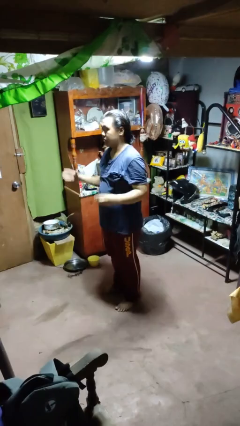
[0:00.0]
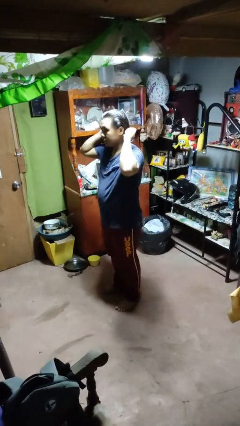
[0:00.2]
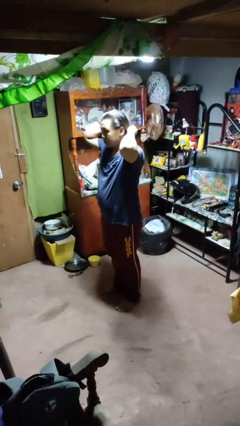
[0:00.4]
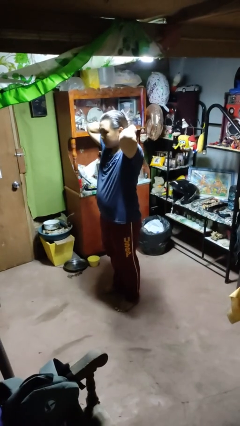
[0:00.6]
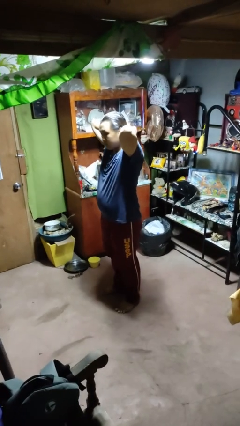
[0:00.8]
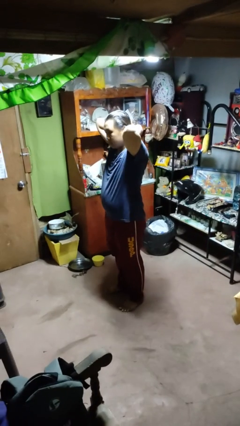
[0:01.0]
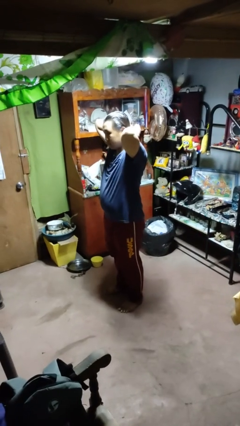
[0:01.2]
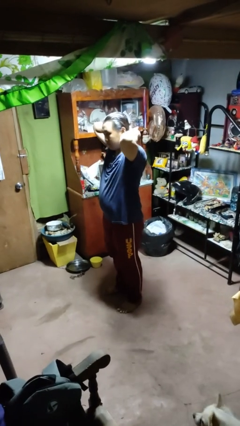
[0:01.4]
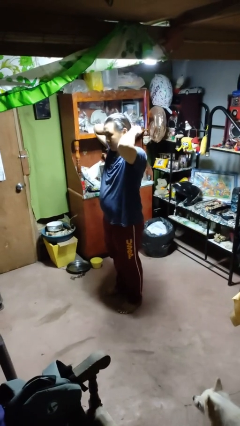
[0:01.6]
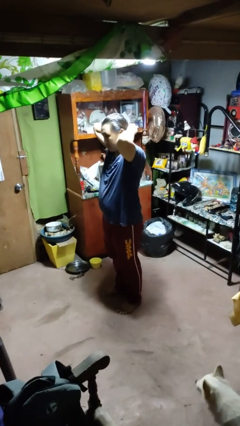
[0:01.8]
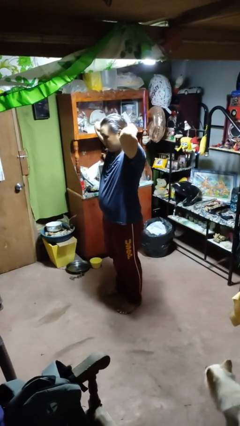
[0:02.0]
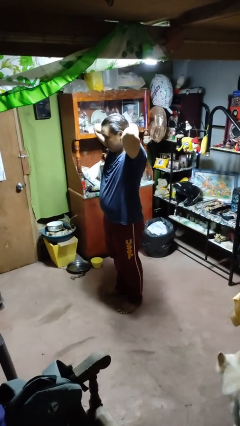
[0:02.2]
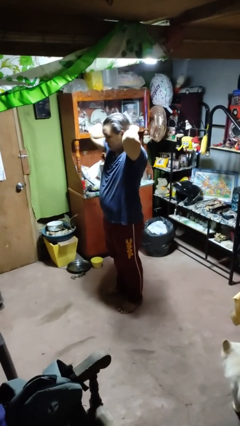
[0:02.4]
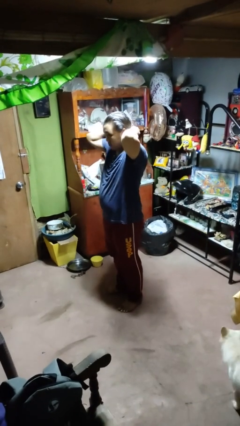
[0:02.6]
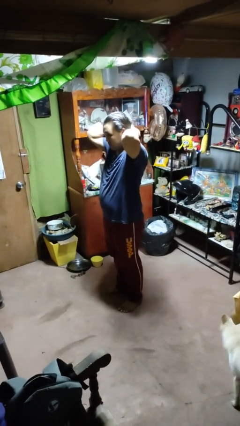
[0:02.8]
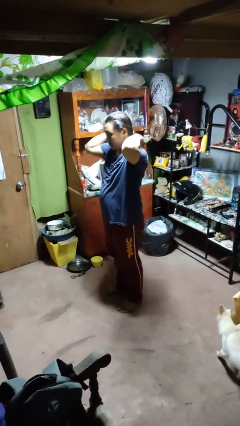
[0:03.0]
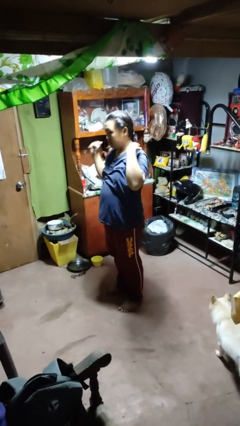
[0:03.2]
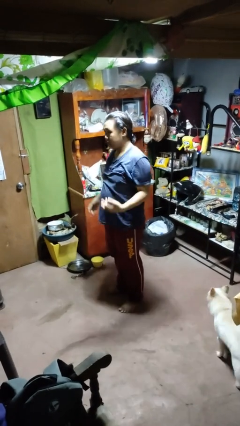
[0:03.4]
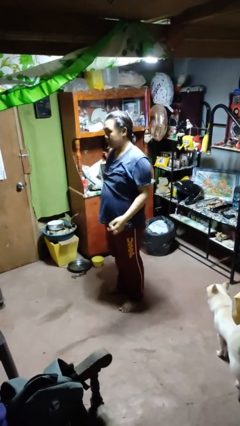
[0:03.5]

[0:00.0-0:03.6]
person puts hair in ponytail

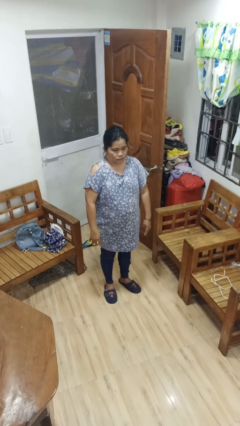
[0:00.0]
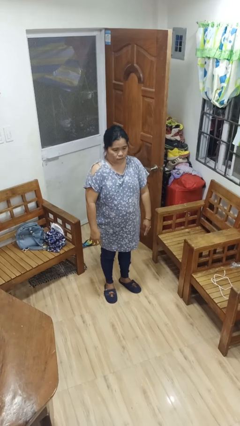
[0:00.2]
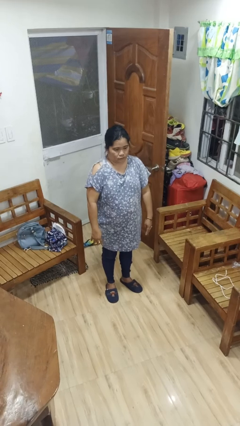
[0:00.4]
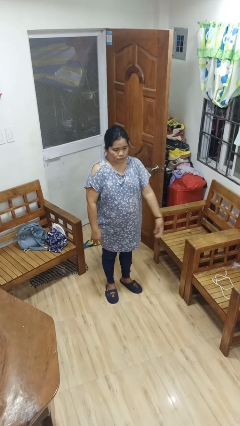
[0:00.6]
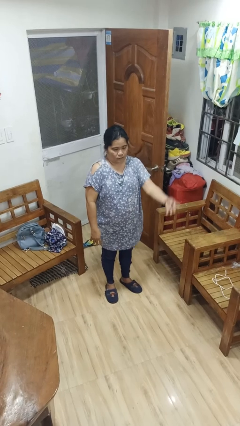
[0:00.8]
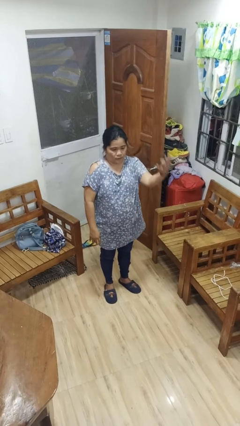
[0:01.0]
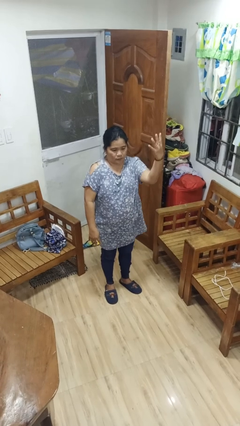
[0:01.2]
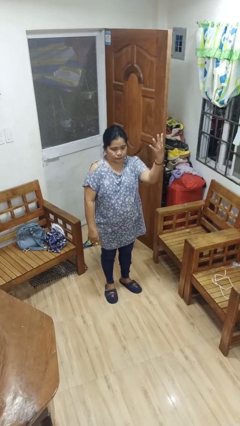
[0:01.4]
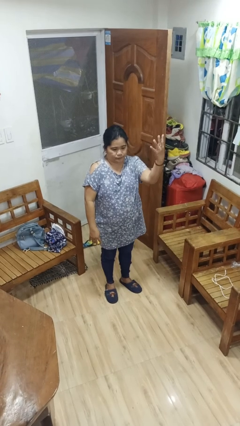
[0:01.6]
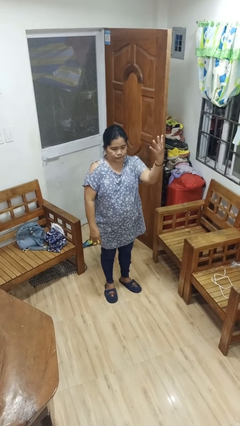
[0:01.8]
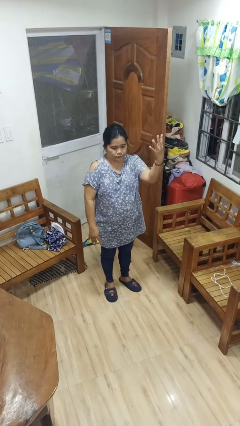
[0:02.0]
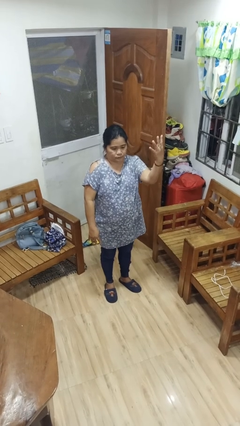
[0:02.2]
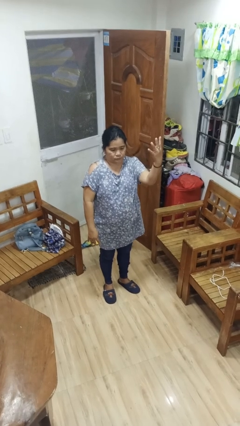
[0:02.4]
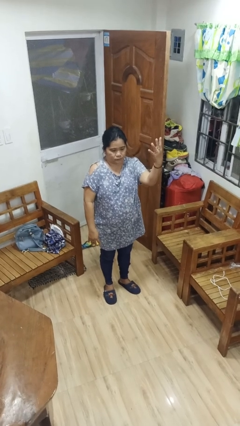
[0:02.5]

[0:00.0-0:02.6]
person gestures number four

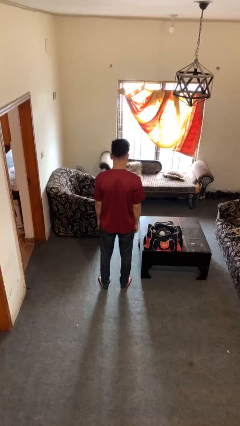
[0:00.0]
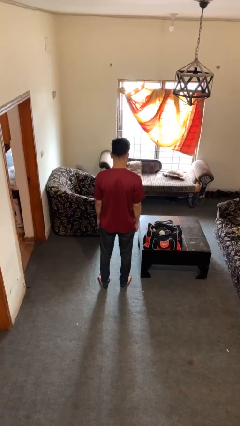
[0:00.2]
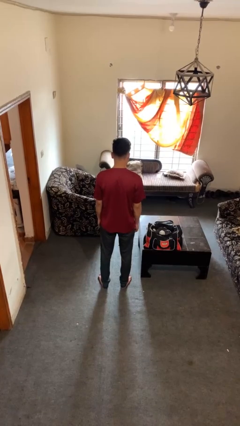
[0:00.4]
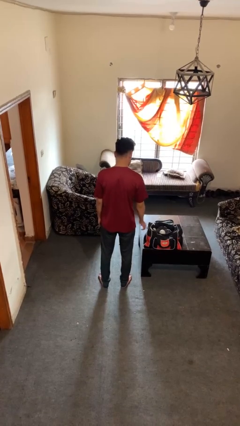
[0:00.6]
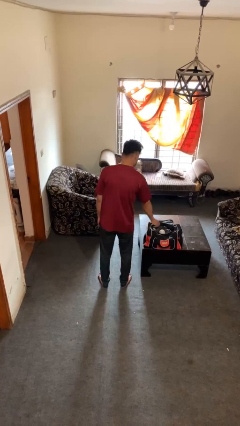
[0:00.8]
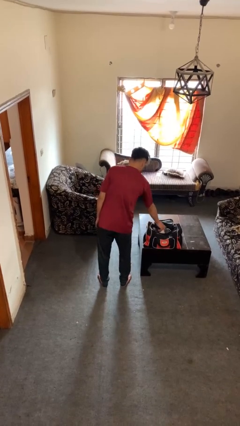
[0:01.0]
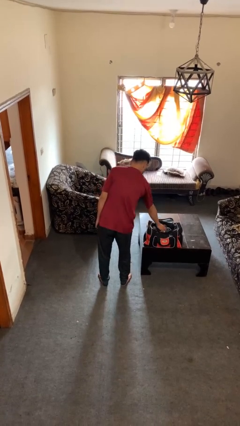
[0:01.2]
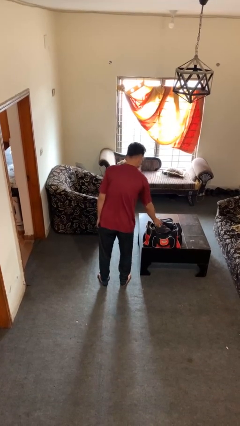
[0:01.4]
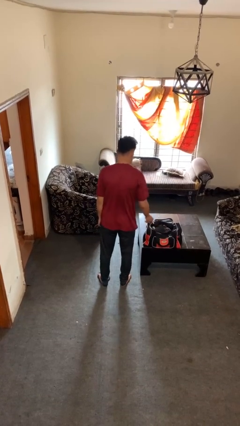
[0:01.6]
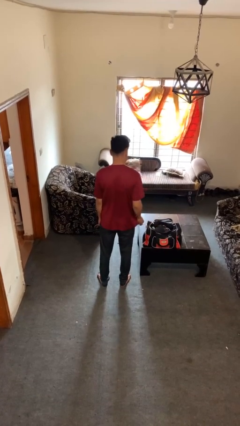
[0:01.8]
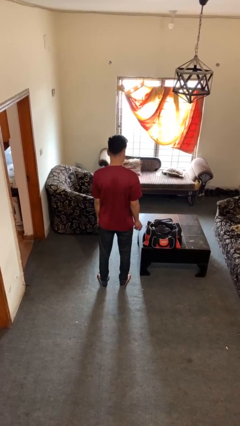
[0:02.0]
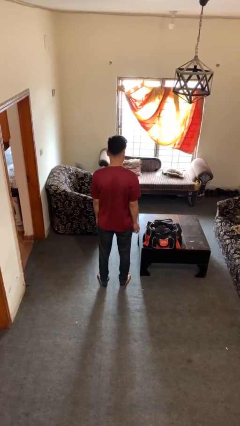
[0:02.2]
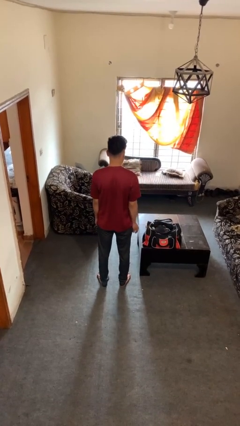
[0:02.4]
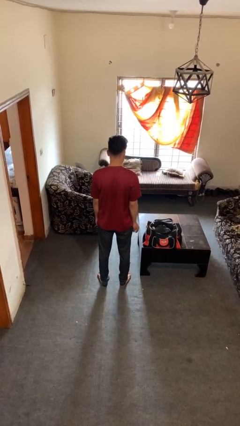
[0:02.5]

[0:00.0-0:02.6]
person takes object from bag

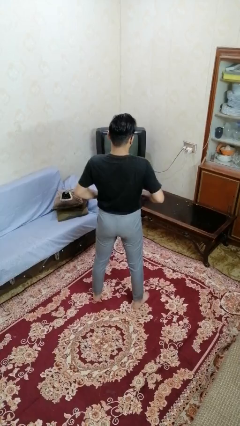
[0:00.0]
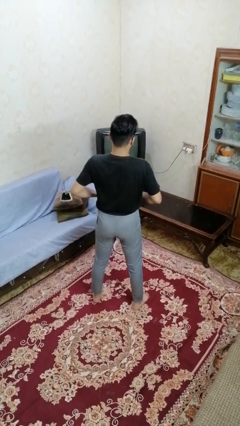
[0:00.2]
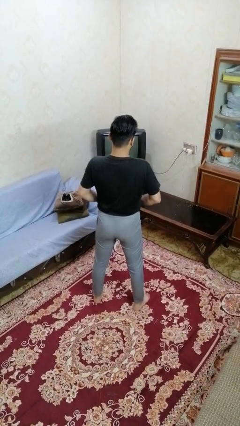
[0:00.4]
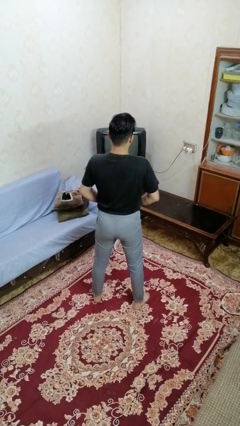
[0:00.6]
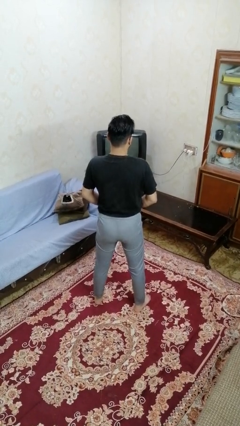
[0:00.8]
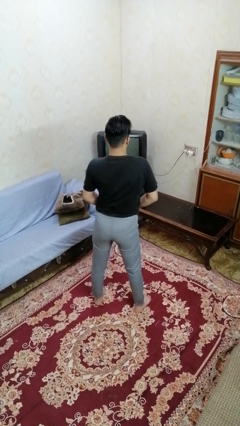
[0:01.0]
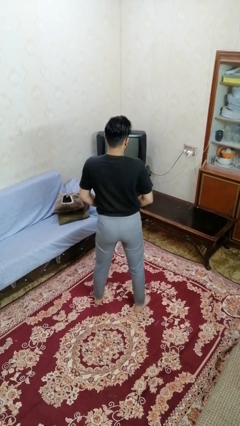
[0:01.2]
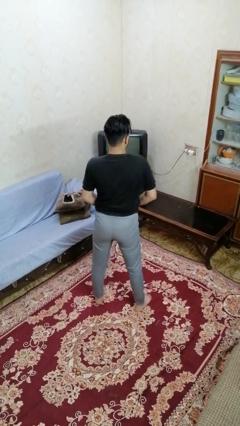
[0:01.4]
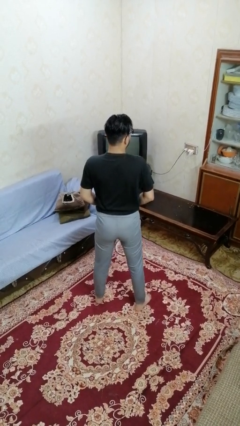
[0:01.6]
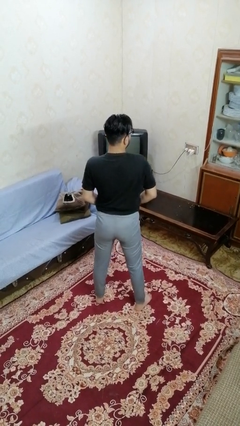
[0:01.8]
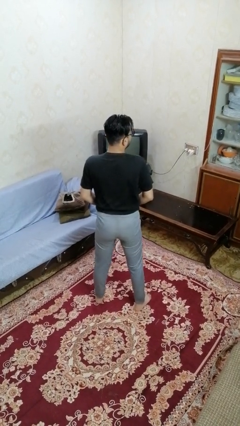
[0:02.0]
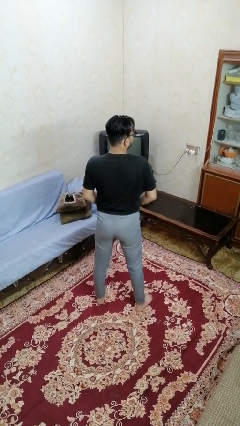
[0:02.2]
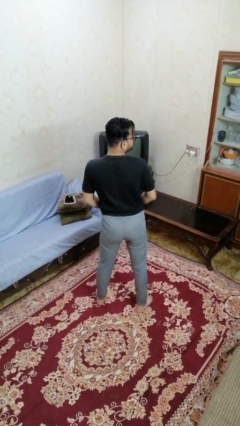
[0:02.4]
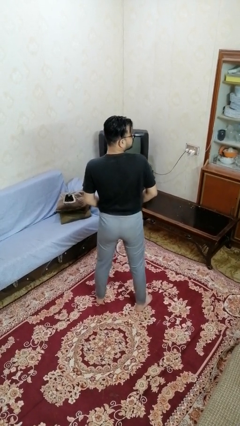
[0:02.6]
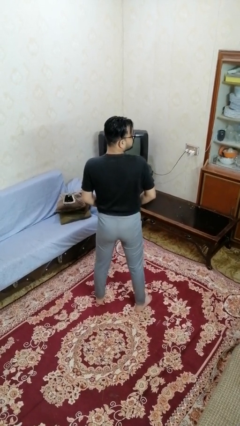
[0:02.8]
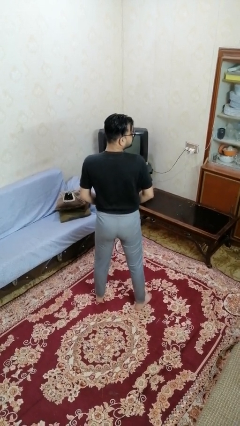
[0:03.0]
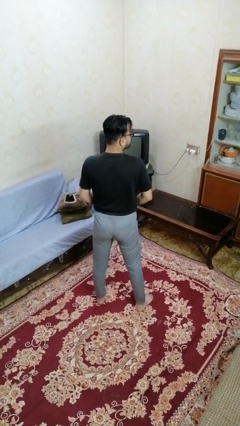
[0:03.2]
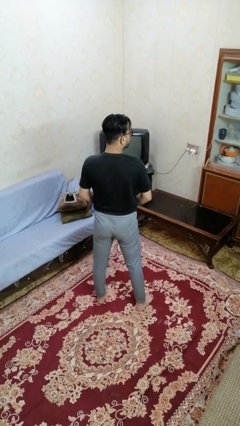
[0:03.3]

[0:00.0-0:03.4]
person wiggles hips

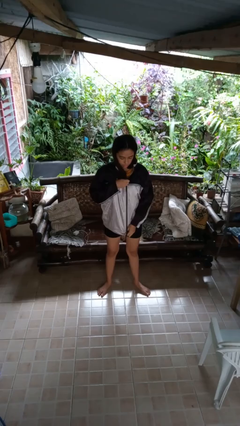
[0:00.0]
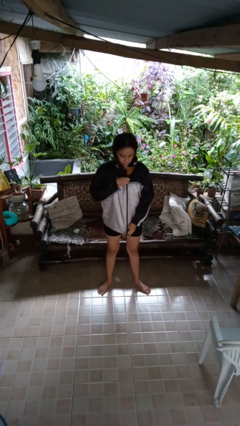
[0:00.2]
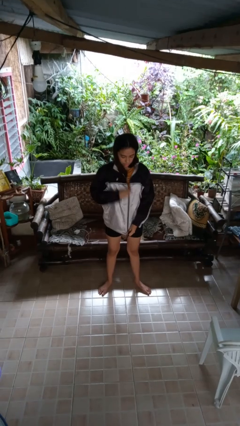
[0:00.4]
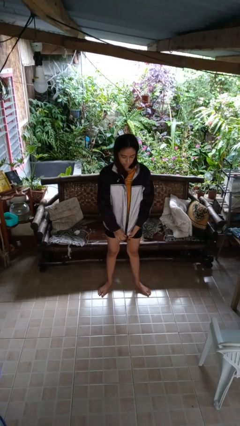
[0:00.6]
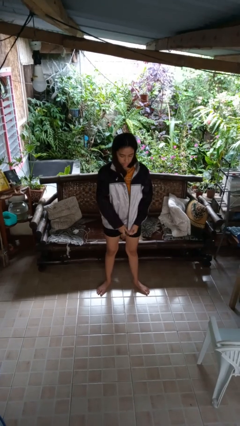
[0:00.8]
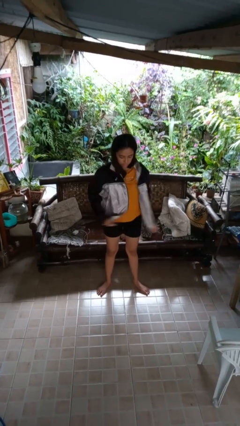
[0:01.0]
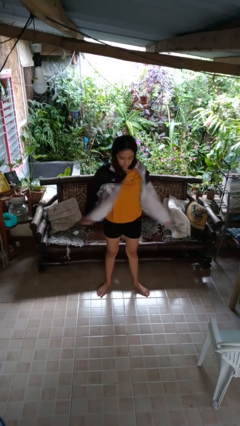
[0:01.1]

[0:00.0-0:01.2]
person unzips jacket

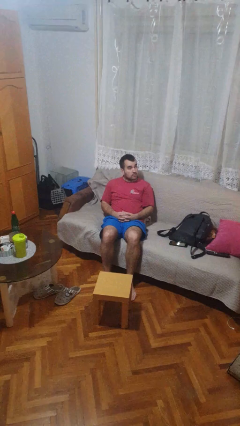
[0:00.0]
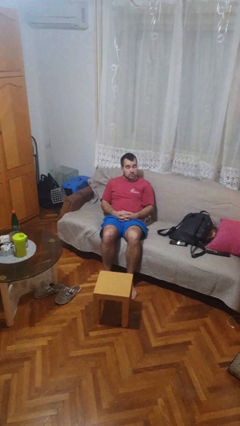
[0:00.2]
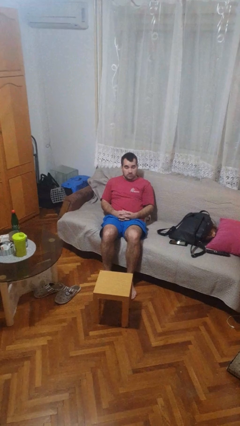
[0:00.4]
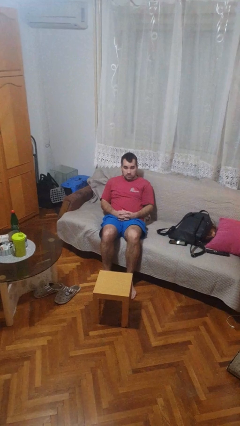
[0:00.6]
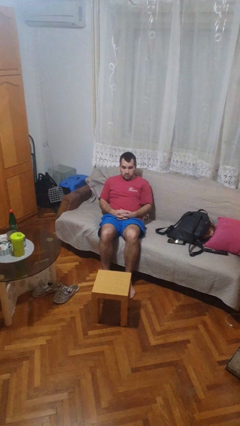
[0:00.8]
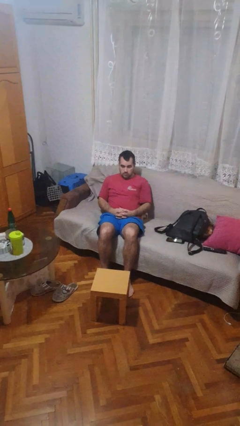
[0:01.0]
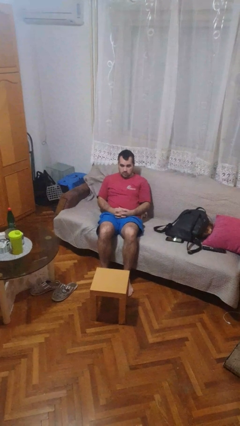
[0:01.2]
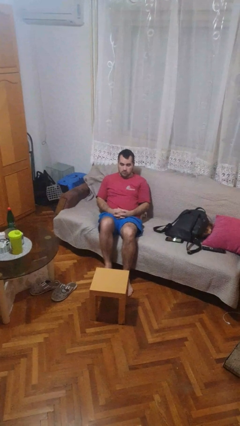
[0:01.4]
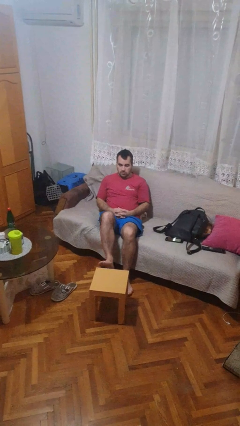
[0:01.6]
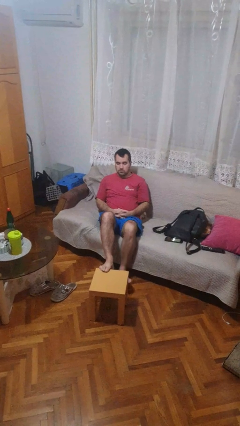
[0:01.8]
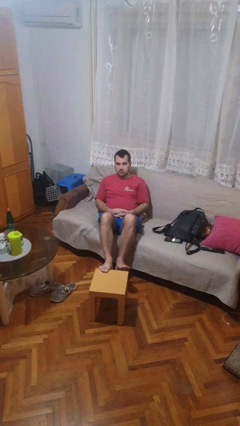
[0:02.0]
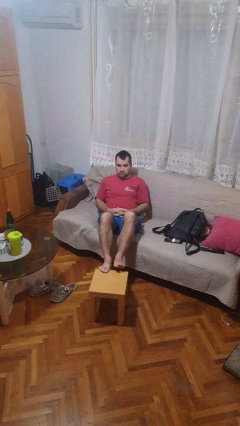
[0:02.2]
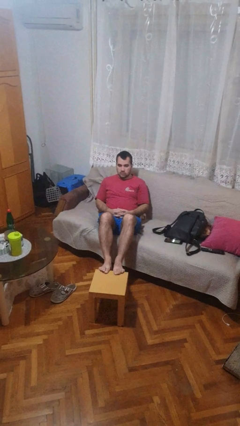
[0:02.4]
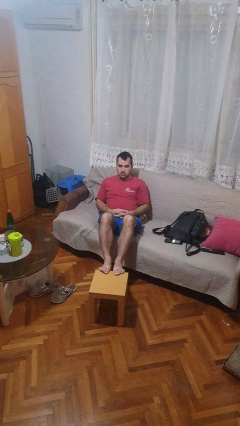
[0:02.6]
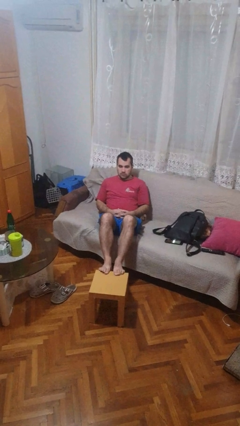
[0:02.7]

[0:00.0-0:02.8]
person puts feet up

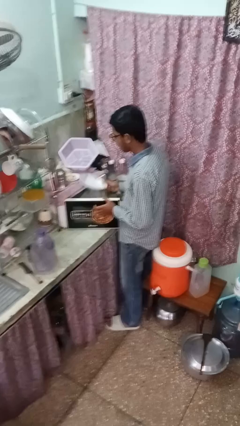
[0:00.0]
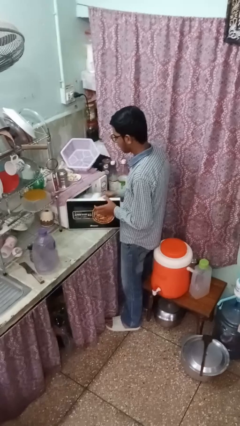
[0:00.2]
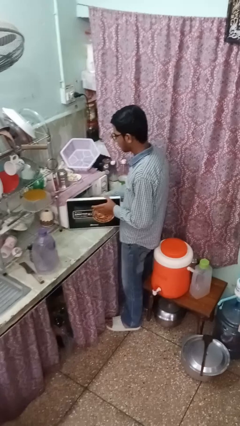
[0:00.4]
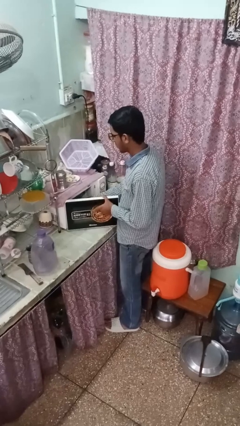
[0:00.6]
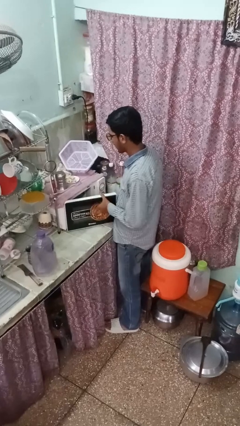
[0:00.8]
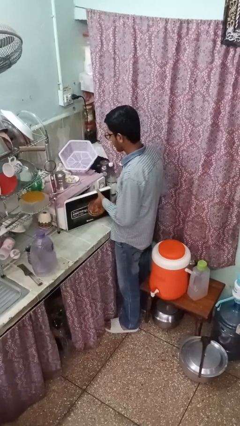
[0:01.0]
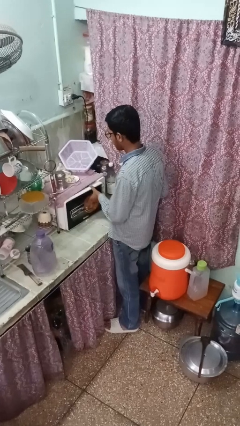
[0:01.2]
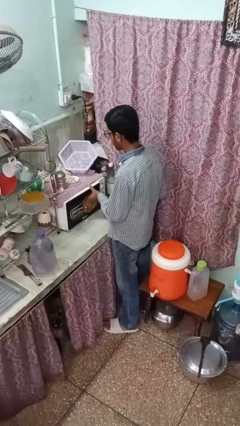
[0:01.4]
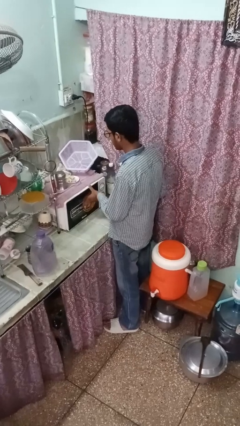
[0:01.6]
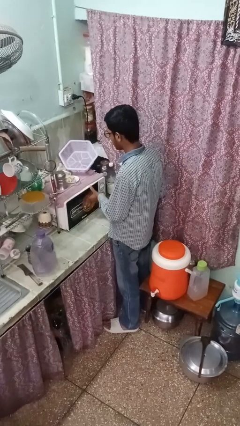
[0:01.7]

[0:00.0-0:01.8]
person puts object into oven
